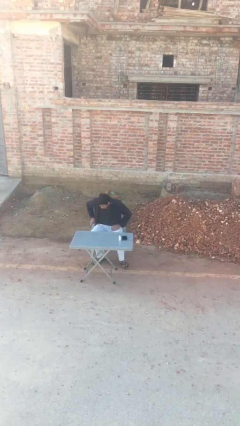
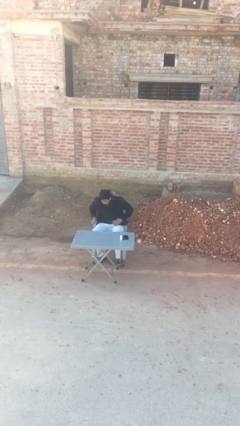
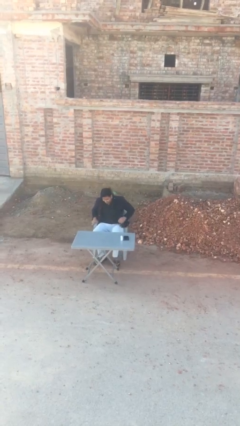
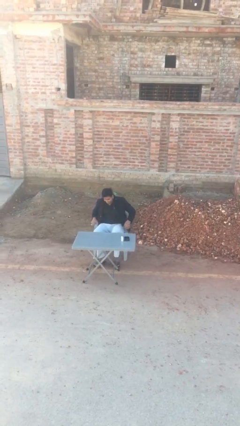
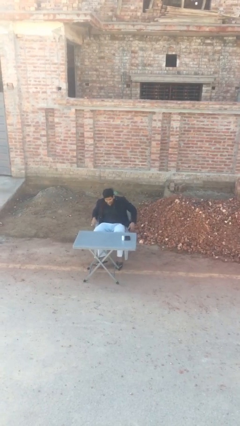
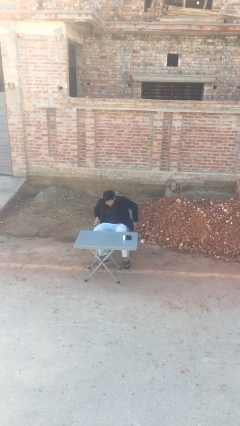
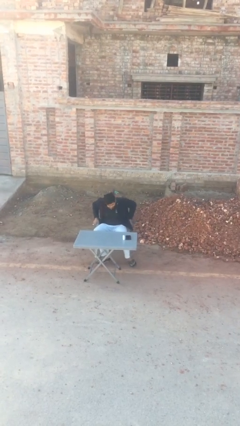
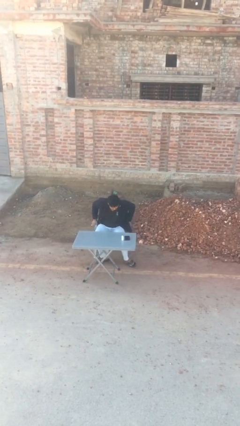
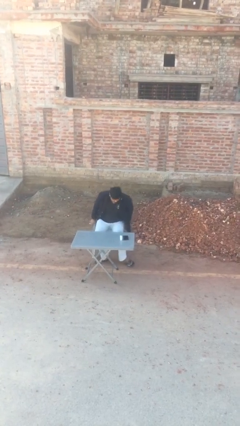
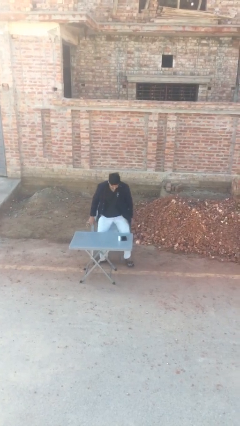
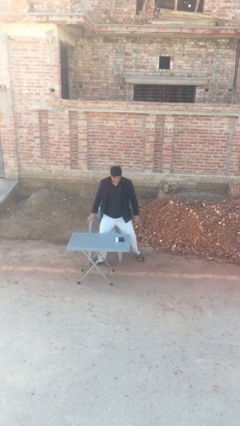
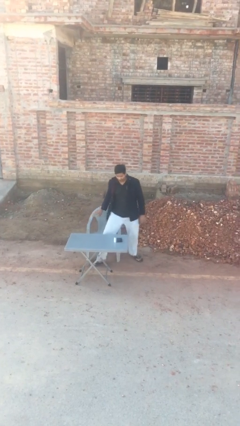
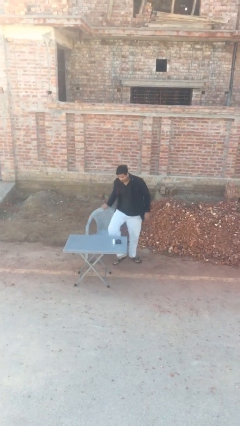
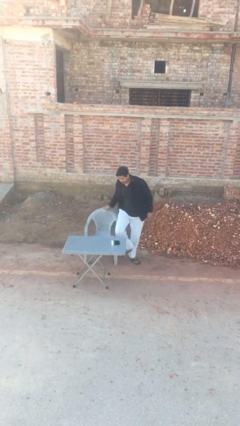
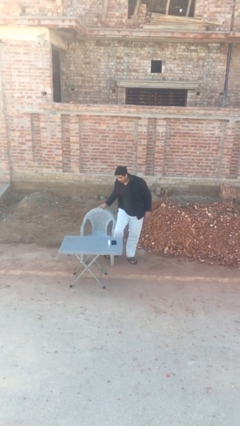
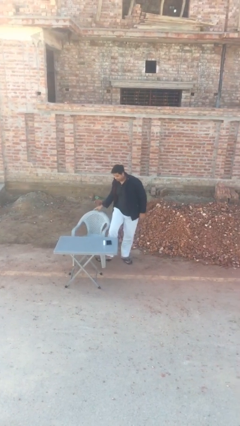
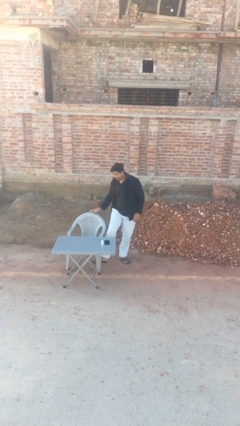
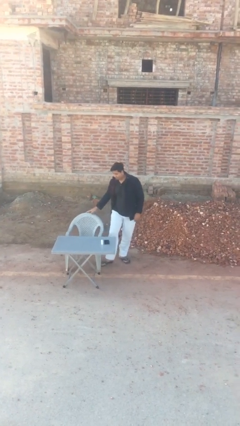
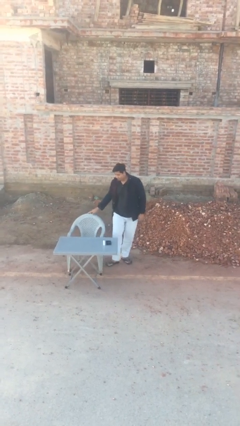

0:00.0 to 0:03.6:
person stands up

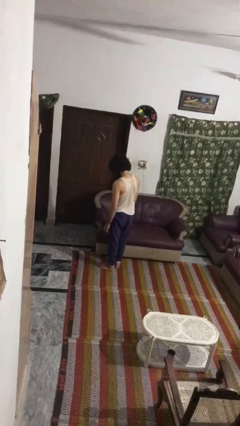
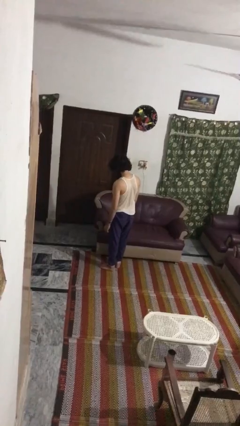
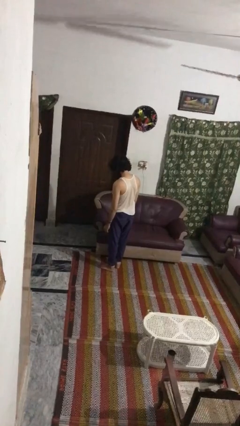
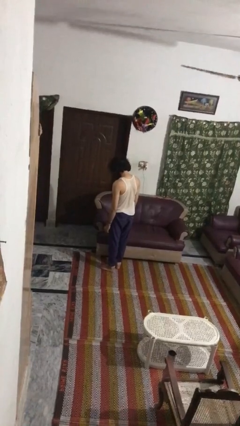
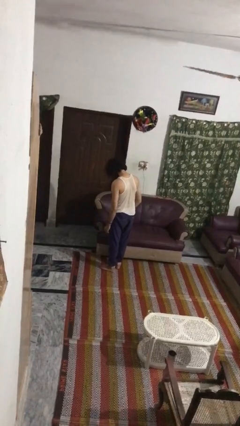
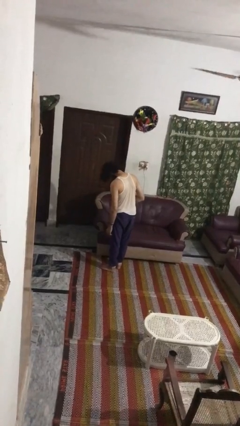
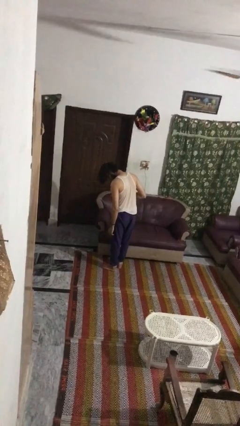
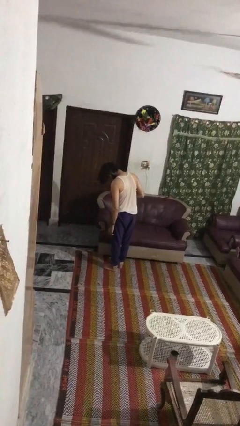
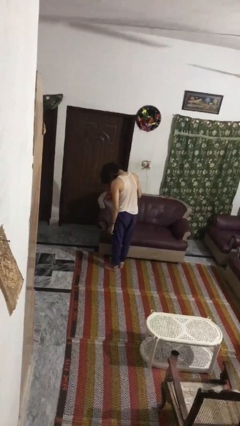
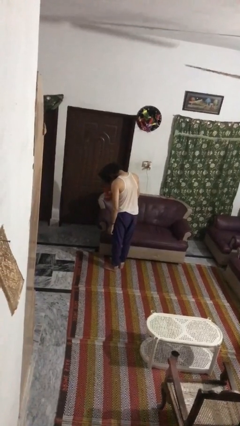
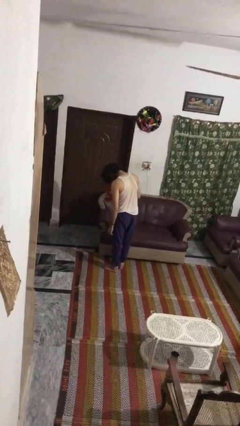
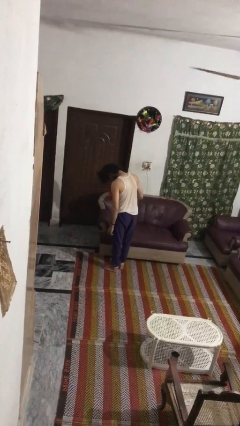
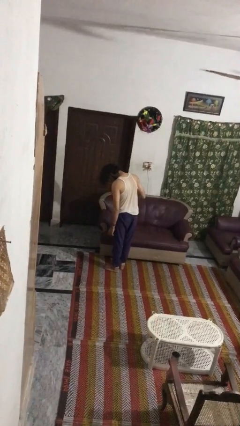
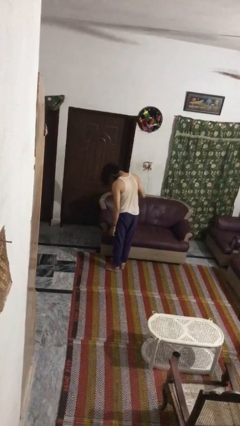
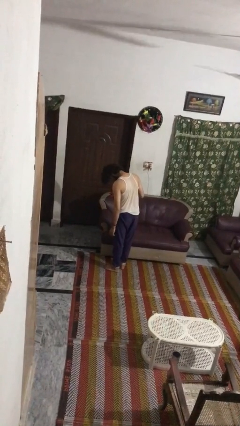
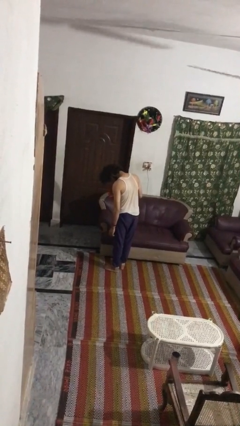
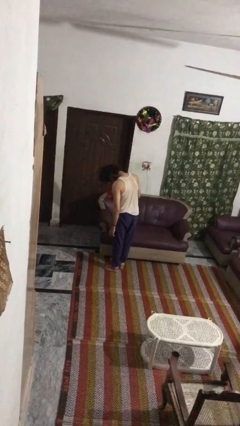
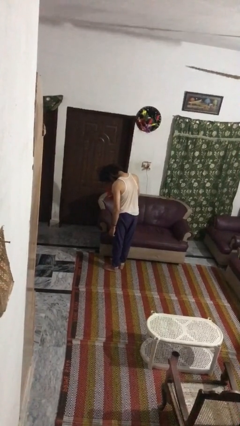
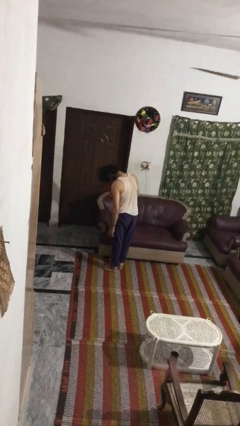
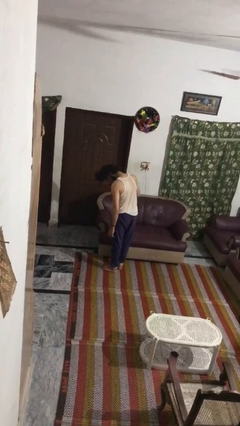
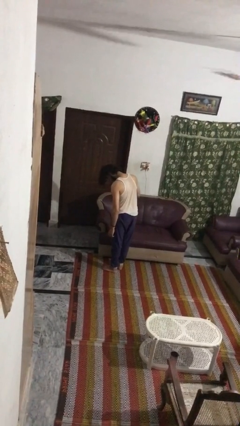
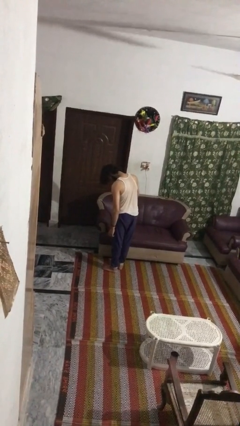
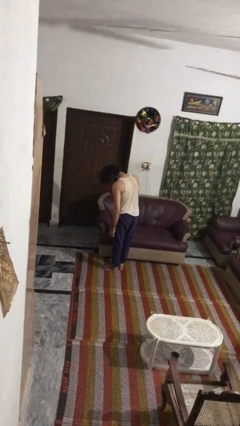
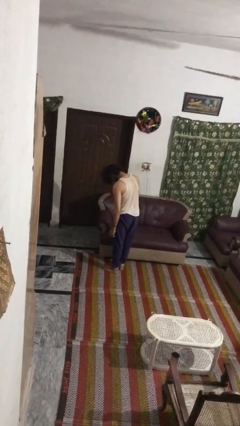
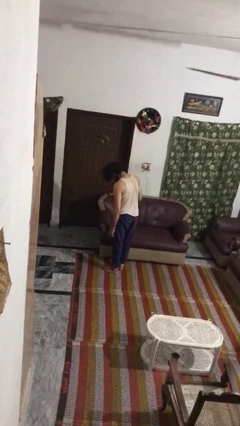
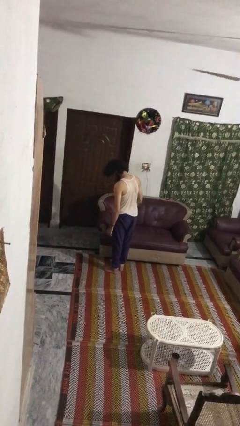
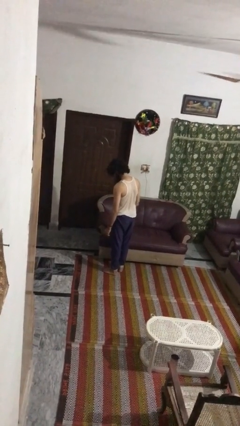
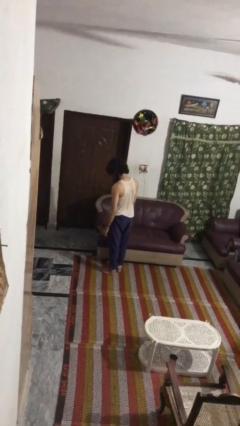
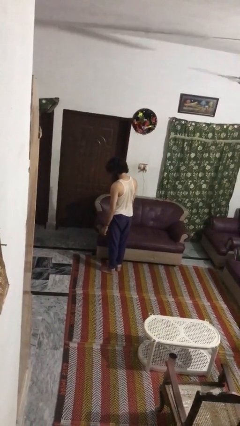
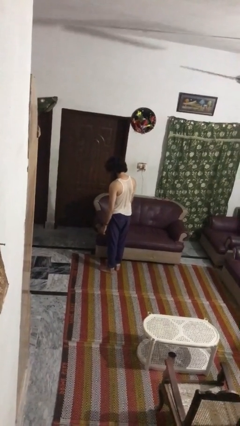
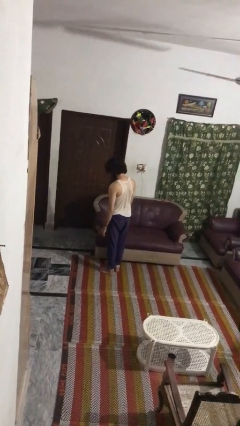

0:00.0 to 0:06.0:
person dries hair with hairdryer

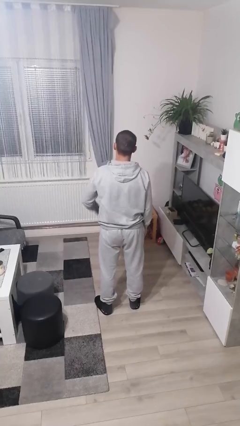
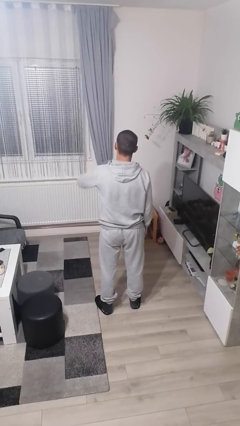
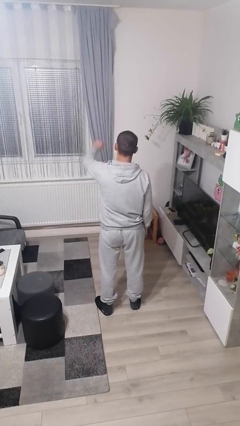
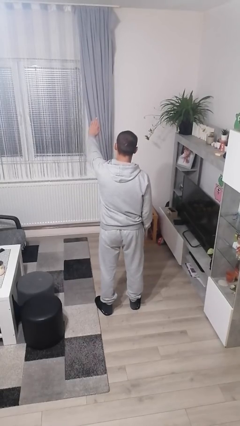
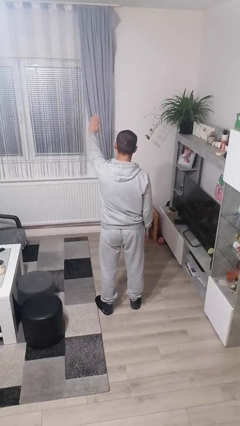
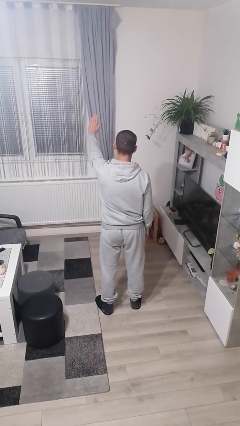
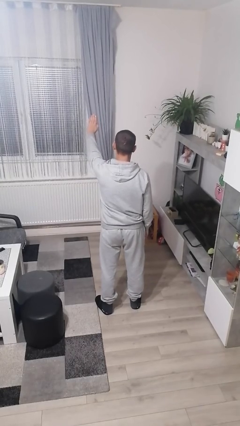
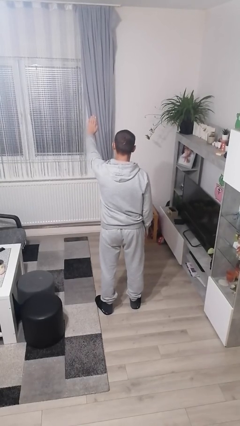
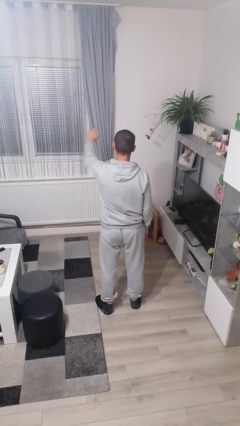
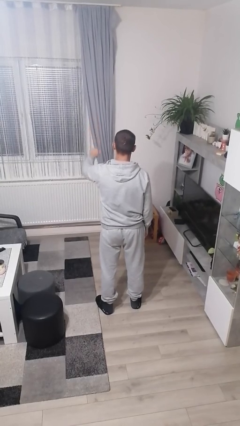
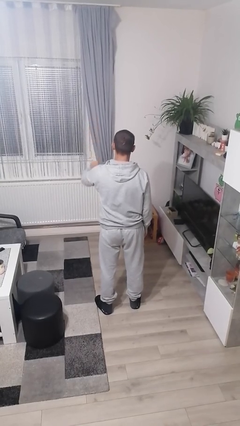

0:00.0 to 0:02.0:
person gestures stop

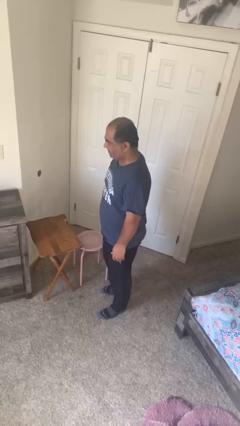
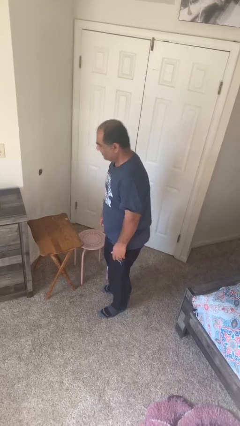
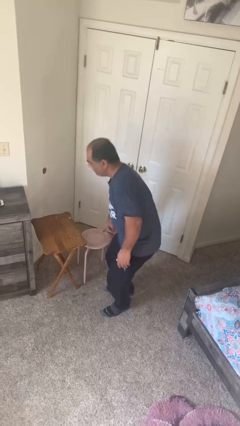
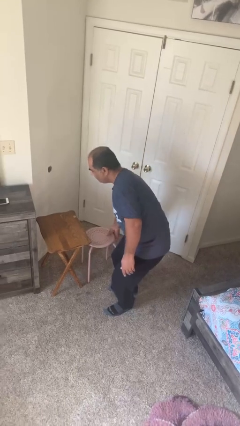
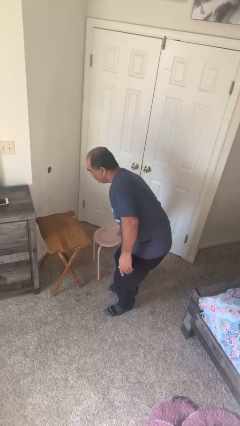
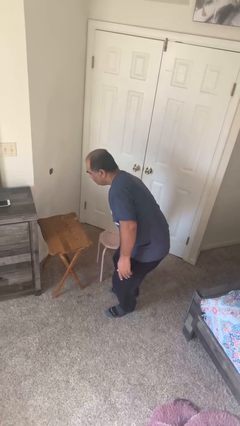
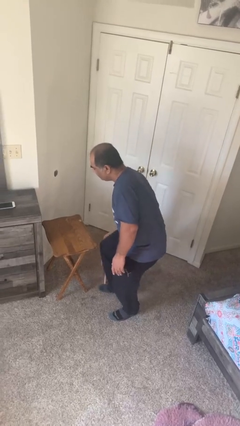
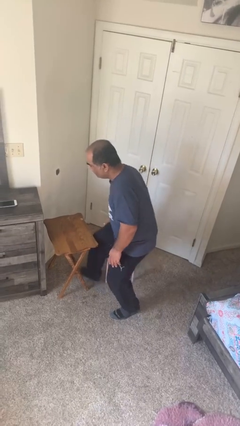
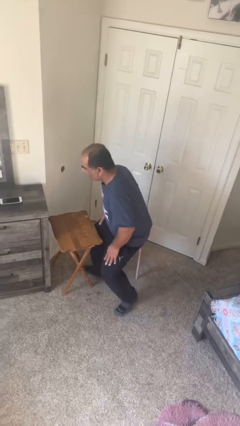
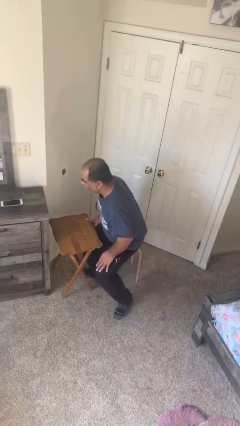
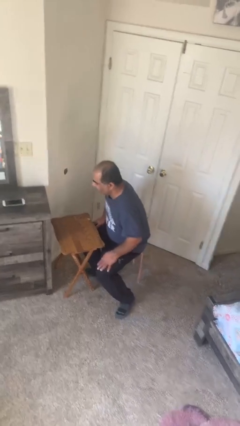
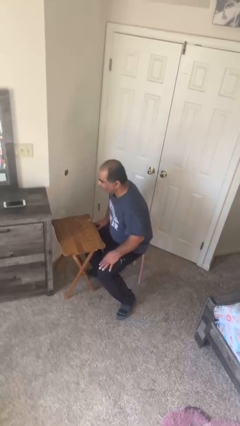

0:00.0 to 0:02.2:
person sits down

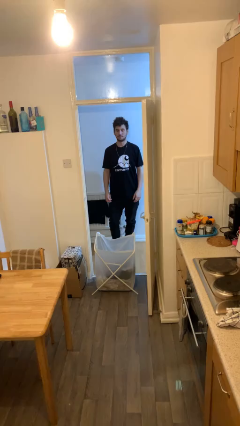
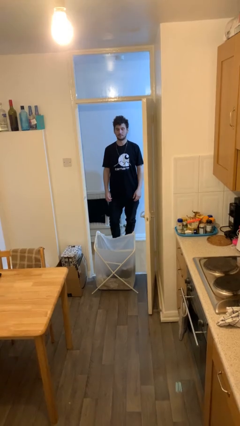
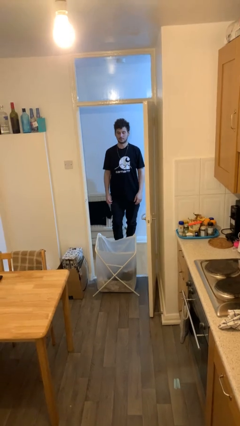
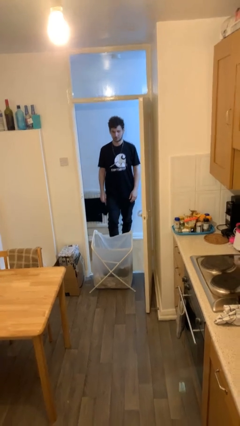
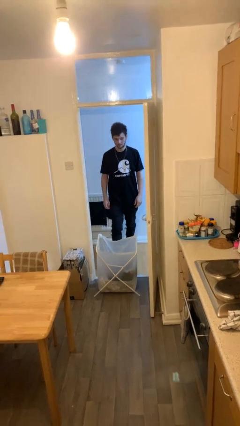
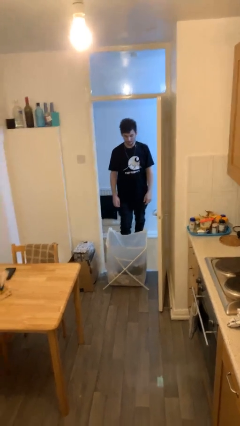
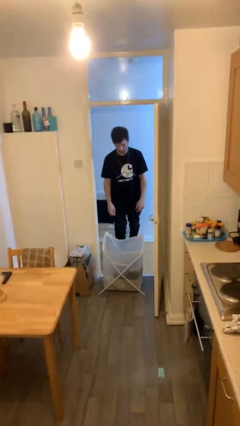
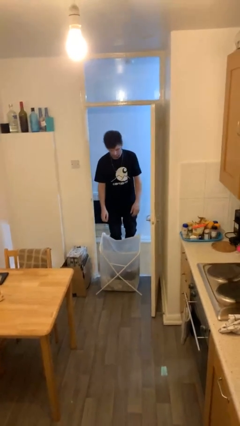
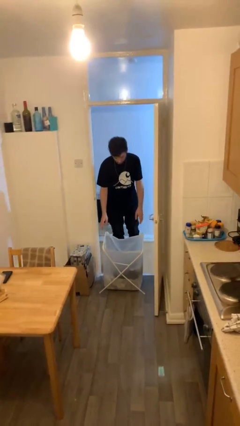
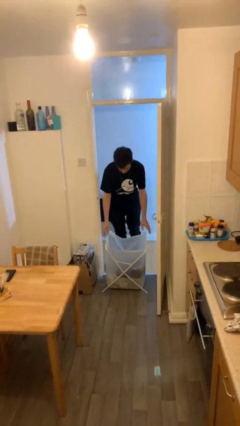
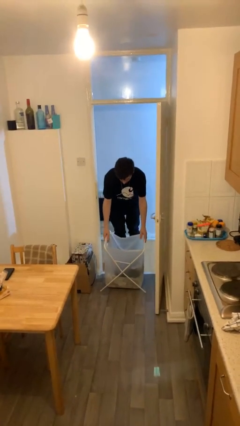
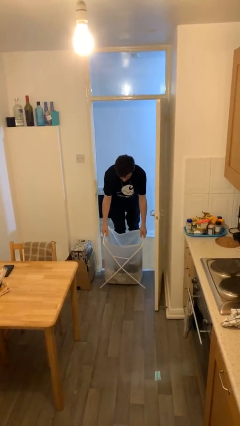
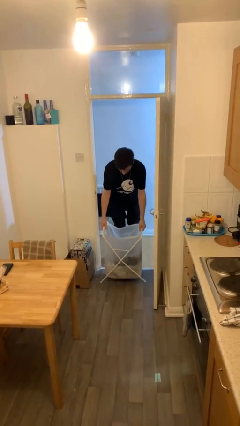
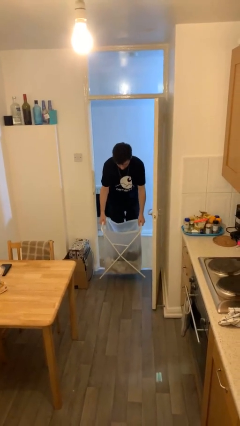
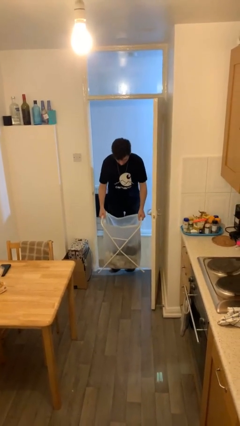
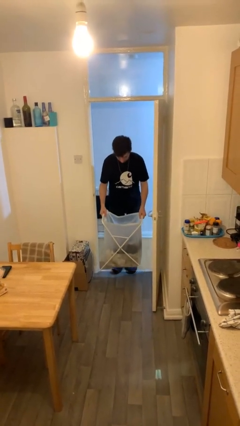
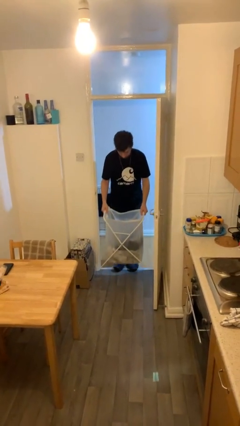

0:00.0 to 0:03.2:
person picks up object from floor

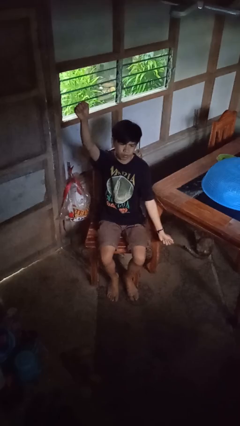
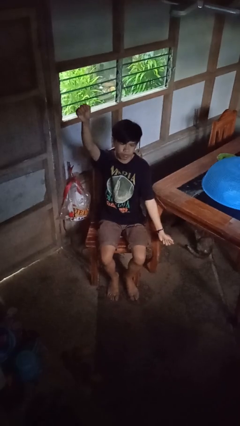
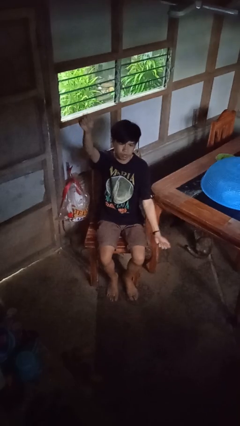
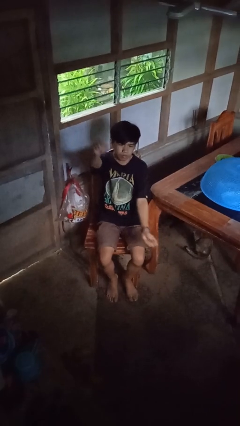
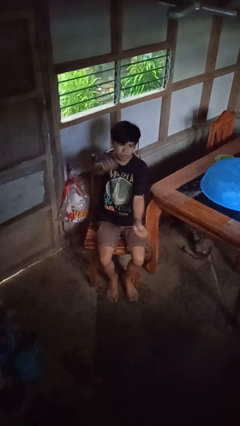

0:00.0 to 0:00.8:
person gestures zoom in
